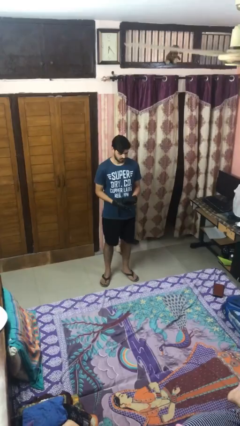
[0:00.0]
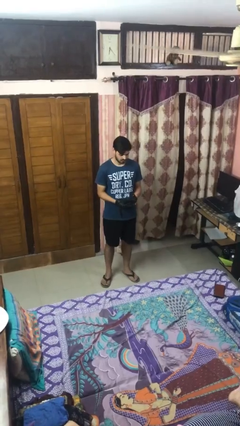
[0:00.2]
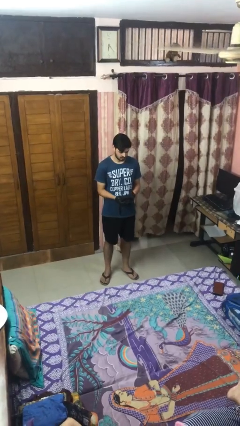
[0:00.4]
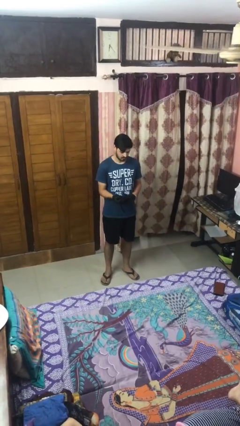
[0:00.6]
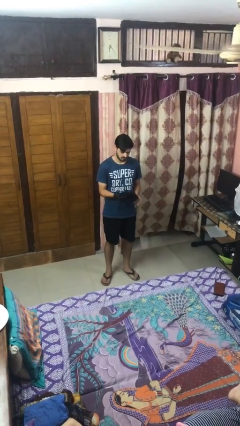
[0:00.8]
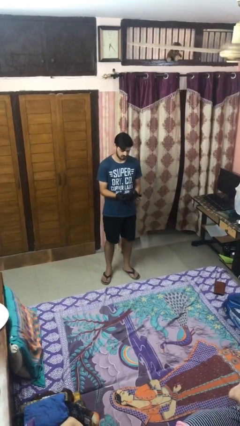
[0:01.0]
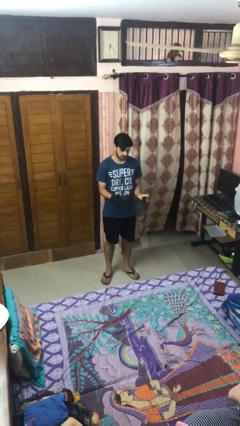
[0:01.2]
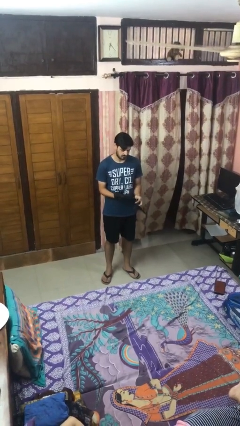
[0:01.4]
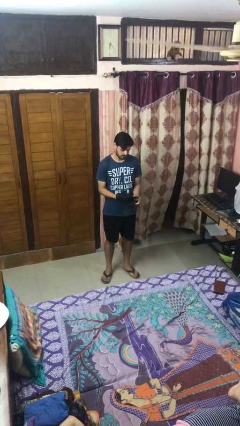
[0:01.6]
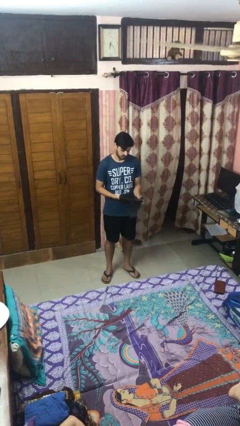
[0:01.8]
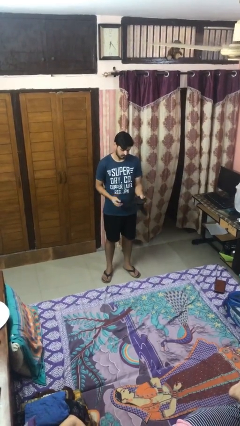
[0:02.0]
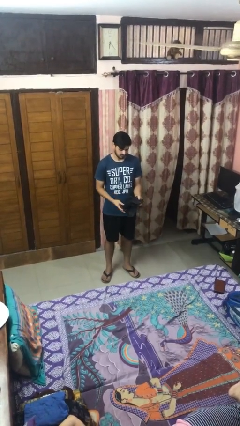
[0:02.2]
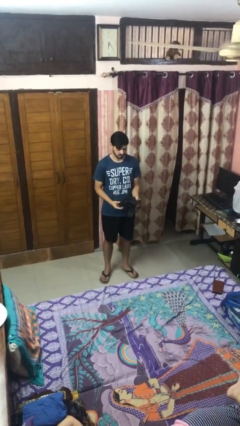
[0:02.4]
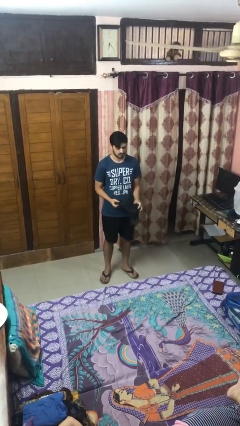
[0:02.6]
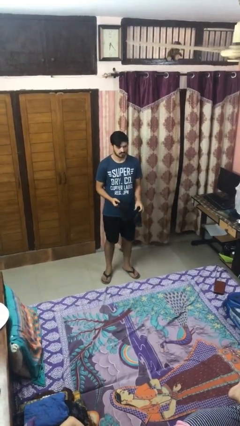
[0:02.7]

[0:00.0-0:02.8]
person takes off gloves

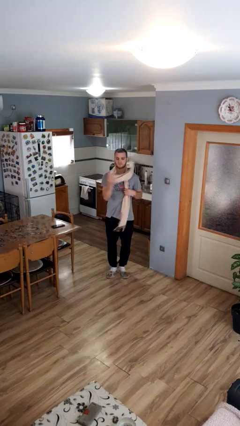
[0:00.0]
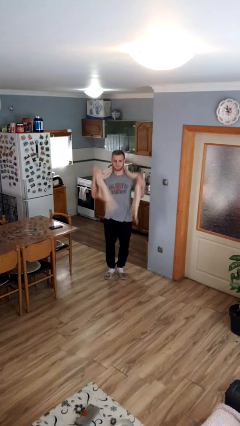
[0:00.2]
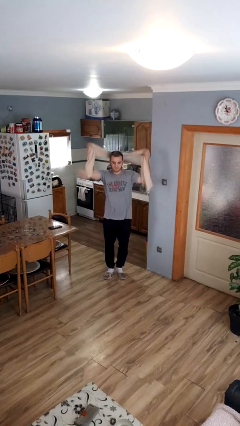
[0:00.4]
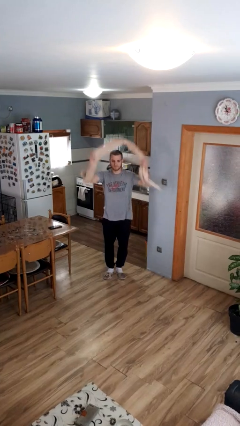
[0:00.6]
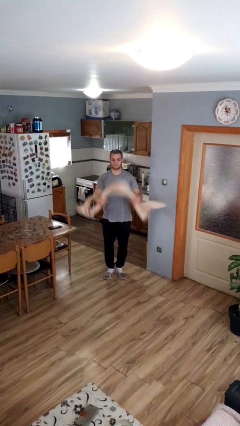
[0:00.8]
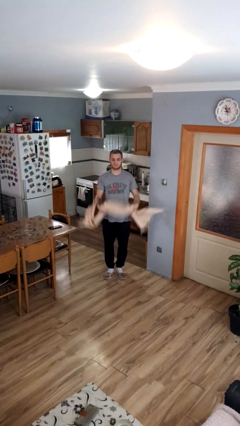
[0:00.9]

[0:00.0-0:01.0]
person takes off scarf

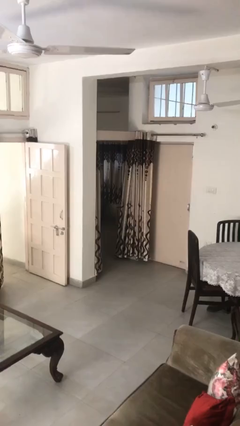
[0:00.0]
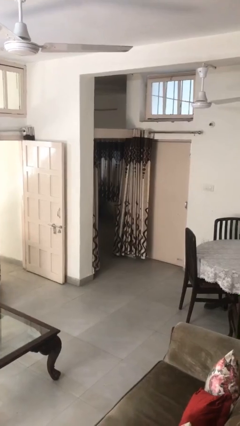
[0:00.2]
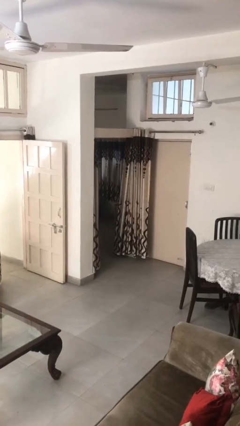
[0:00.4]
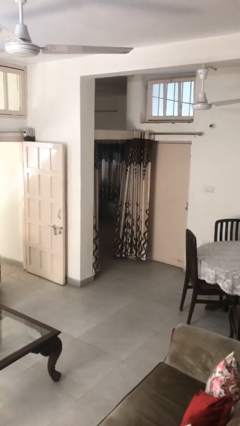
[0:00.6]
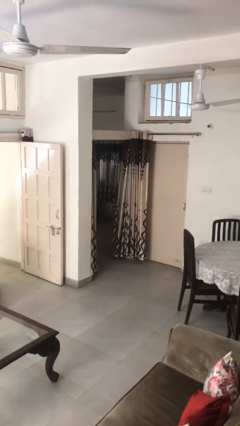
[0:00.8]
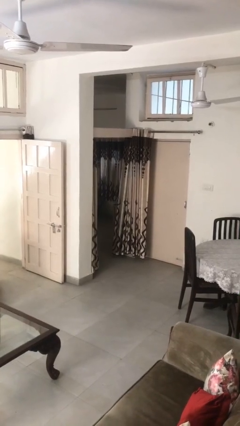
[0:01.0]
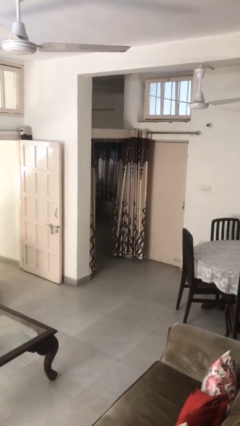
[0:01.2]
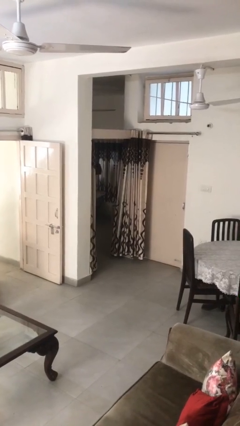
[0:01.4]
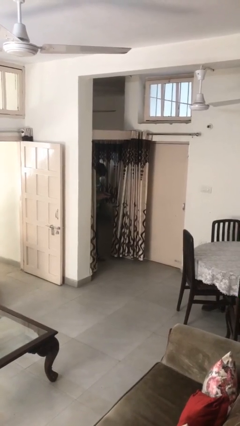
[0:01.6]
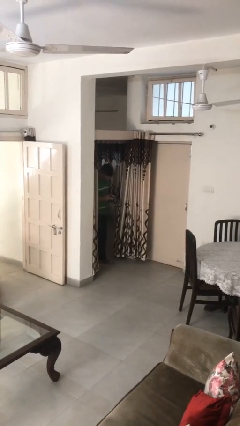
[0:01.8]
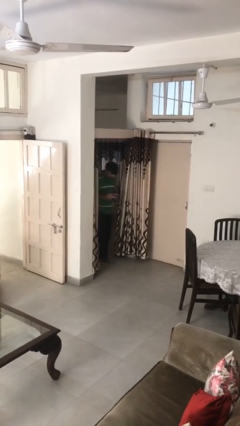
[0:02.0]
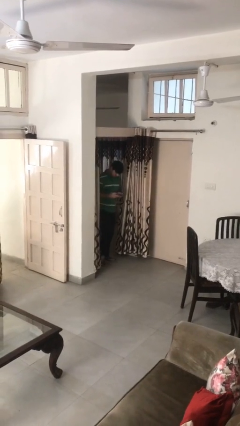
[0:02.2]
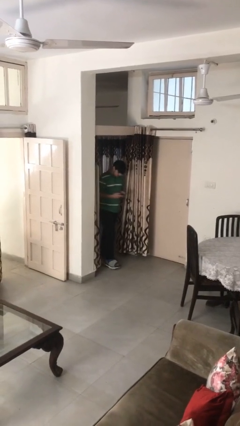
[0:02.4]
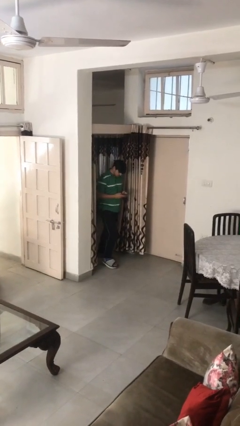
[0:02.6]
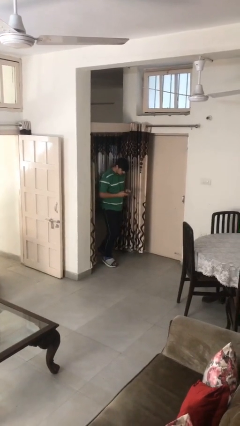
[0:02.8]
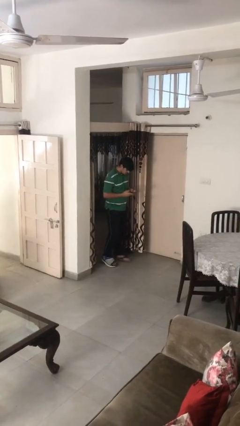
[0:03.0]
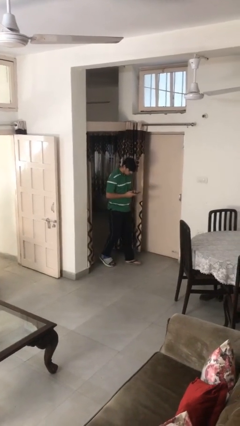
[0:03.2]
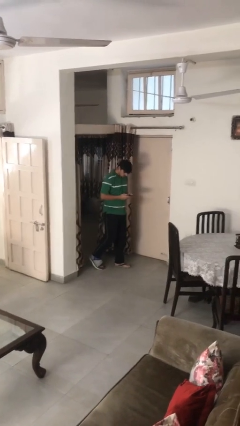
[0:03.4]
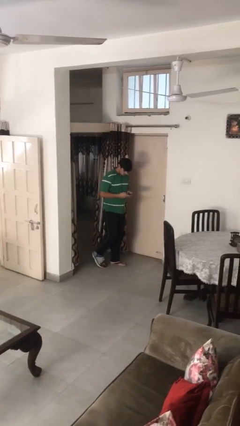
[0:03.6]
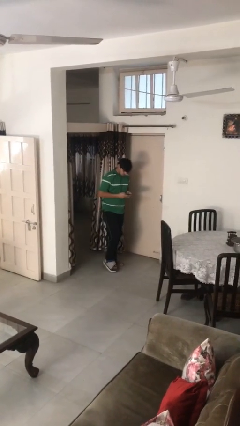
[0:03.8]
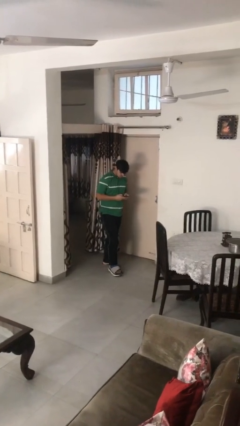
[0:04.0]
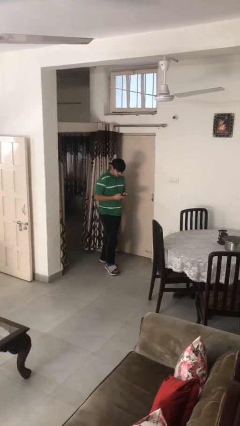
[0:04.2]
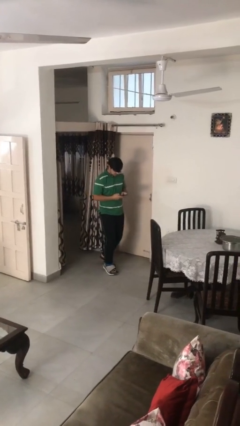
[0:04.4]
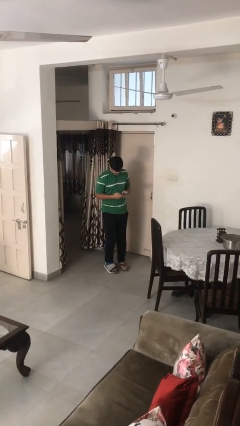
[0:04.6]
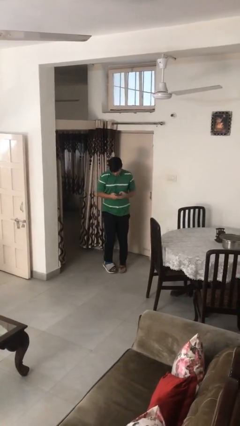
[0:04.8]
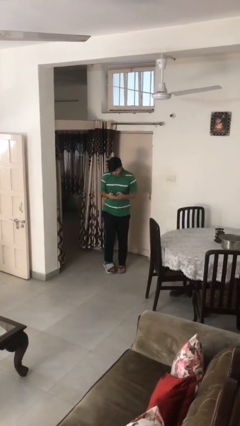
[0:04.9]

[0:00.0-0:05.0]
person enters scene through structure

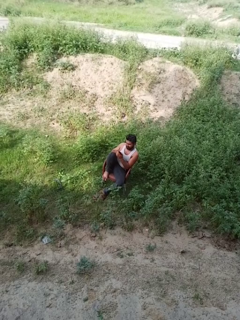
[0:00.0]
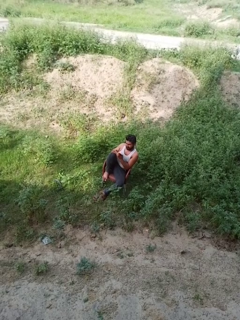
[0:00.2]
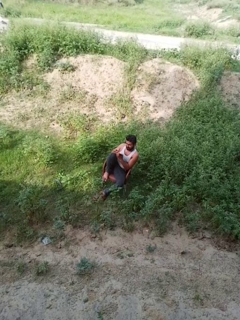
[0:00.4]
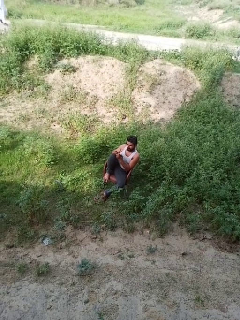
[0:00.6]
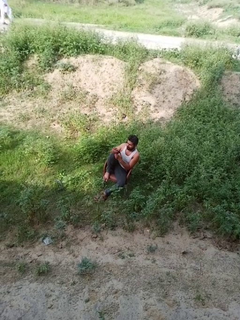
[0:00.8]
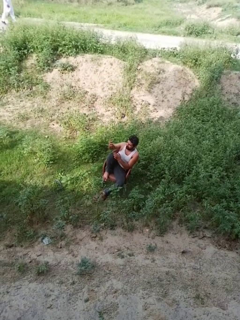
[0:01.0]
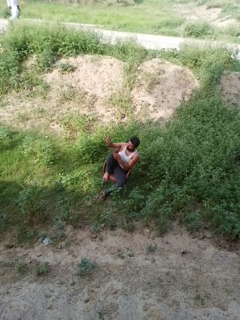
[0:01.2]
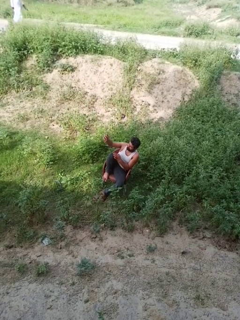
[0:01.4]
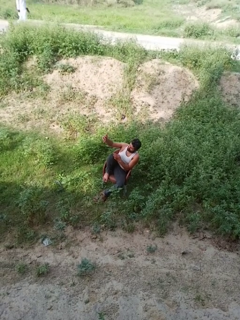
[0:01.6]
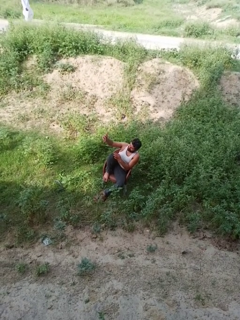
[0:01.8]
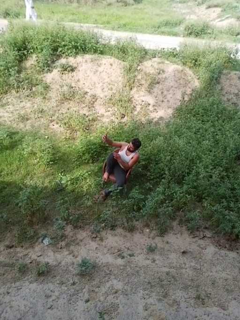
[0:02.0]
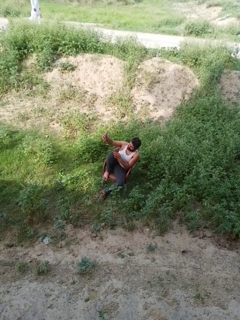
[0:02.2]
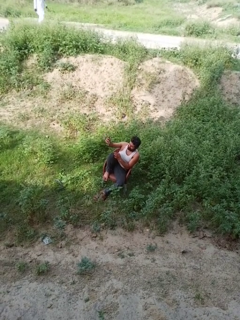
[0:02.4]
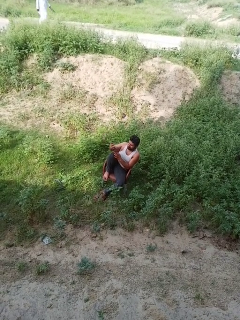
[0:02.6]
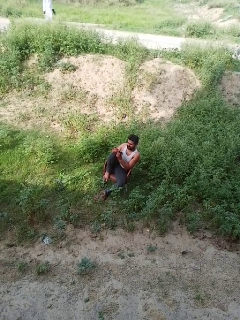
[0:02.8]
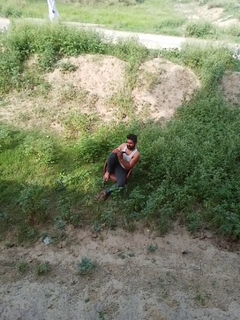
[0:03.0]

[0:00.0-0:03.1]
person takes selfie

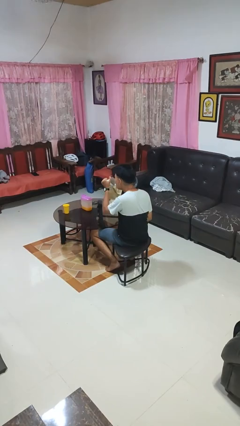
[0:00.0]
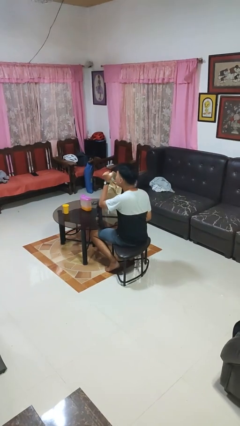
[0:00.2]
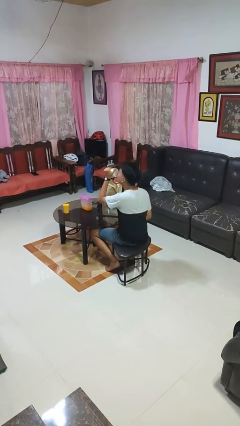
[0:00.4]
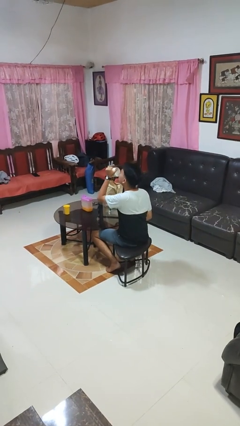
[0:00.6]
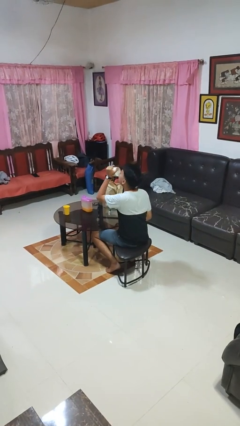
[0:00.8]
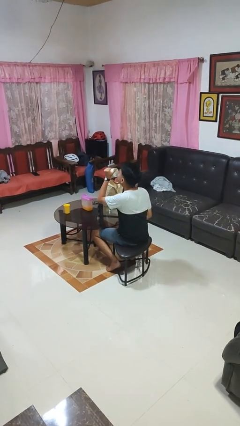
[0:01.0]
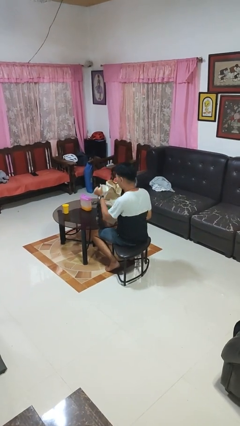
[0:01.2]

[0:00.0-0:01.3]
person drinks from mug

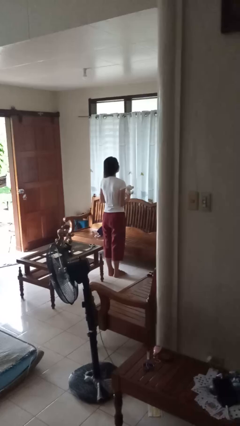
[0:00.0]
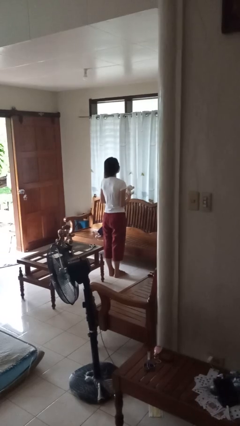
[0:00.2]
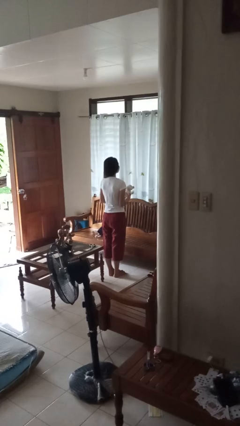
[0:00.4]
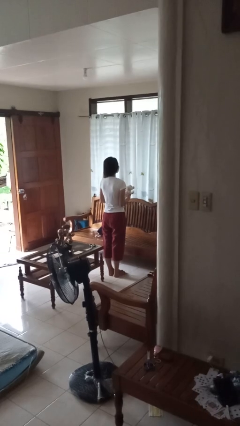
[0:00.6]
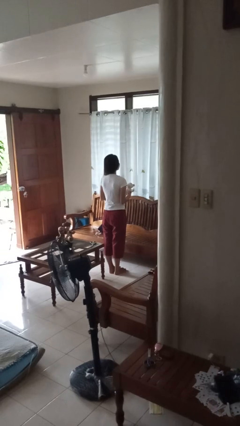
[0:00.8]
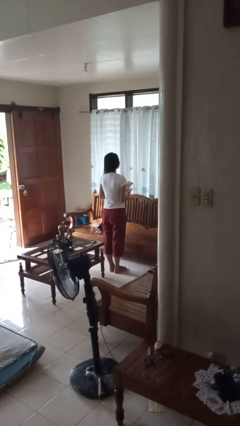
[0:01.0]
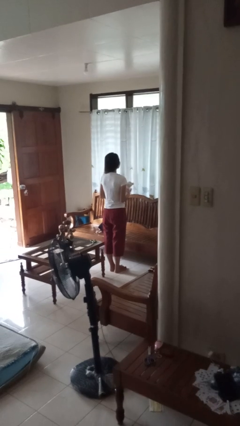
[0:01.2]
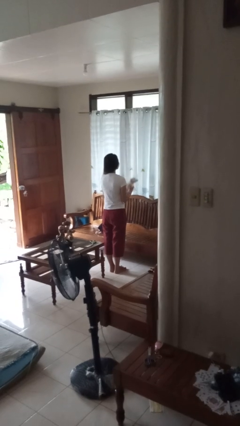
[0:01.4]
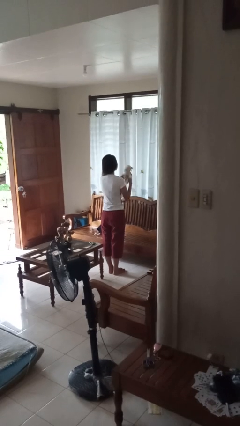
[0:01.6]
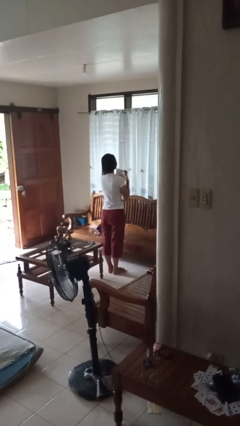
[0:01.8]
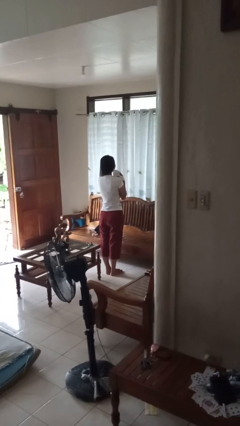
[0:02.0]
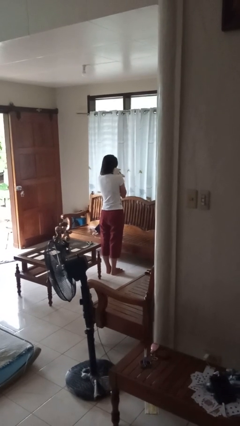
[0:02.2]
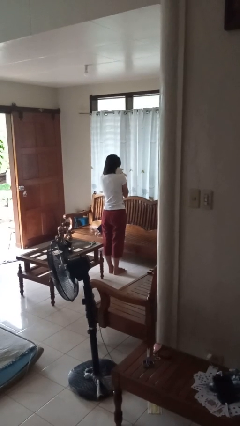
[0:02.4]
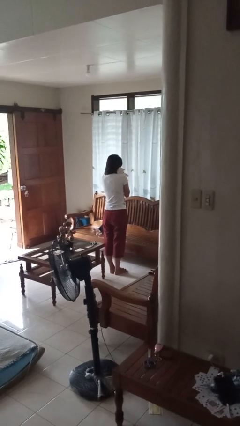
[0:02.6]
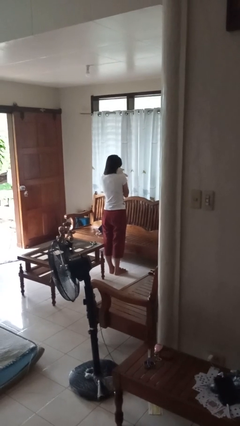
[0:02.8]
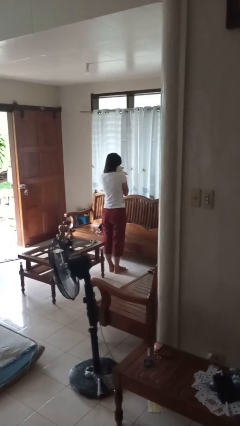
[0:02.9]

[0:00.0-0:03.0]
person hugs stuffed animal

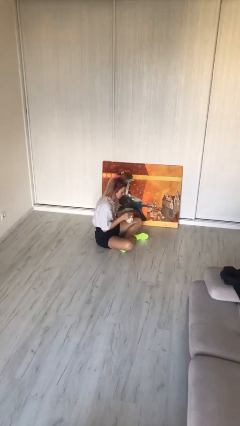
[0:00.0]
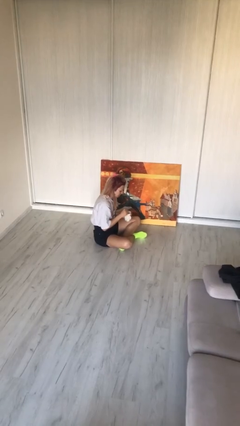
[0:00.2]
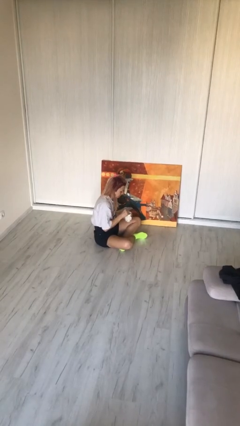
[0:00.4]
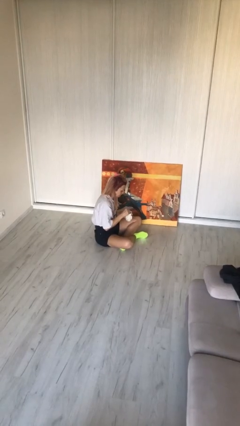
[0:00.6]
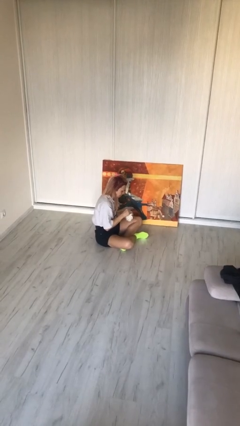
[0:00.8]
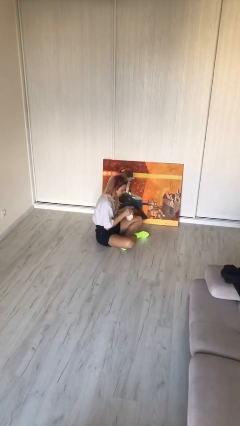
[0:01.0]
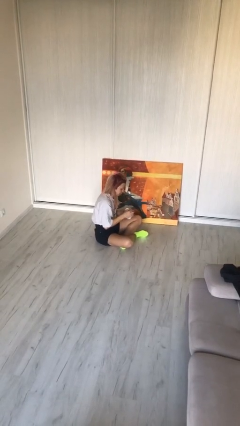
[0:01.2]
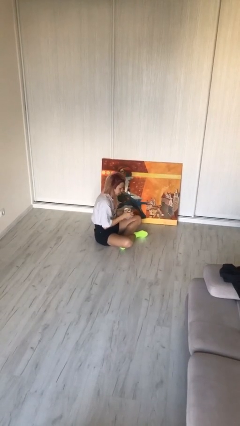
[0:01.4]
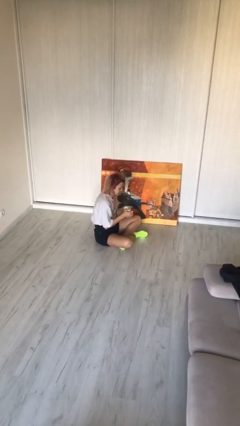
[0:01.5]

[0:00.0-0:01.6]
person stirs mug

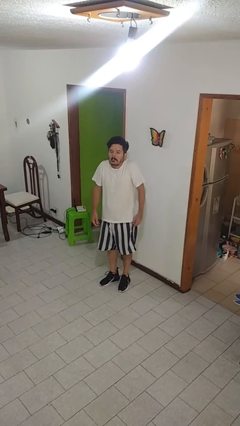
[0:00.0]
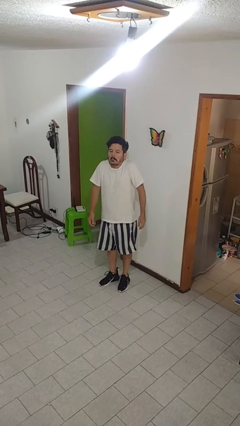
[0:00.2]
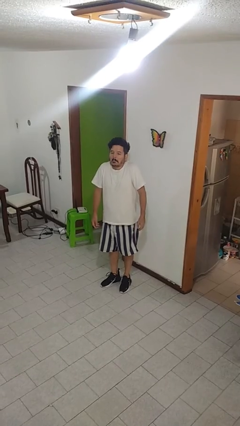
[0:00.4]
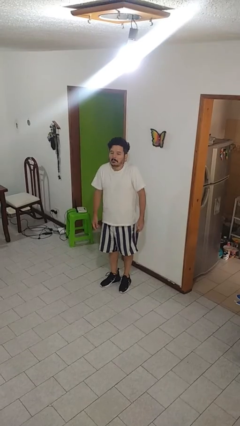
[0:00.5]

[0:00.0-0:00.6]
person shrugs
